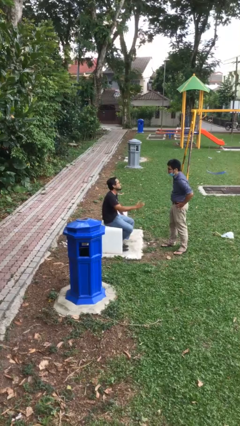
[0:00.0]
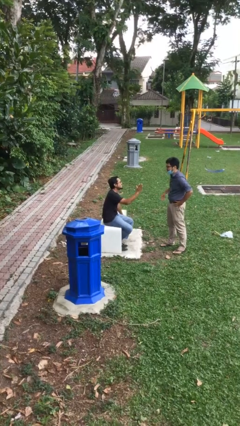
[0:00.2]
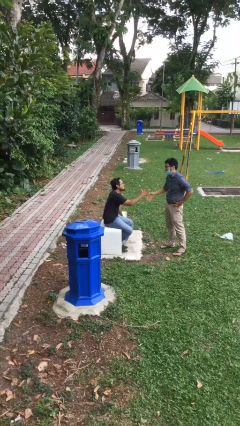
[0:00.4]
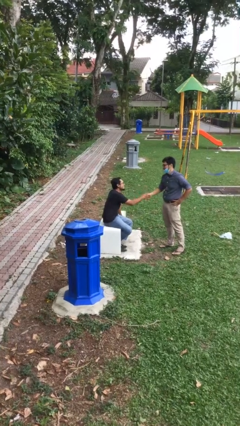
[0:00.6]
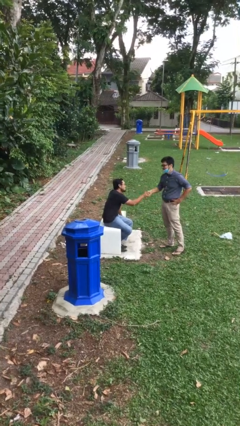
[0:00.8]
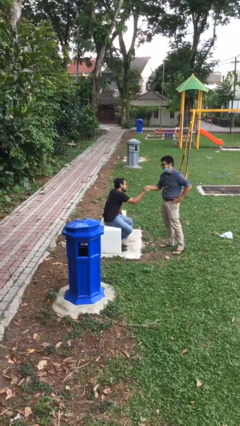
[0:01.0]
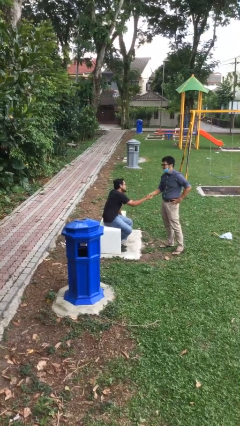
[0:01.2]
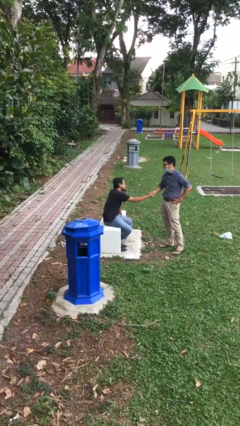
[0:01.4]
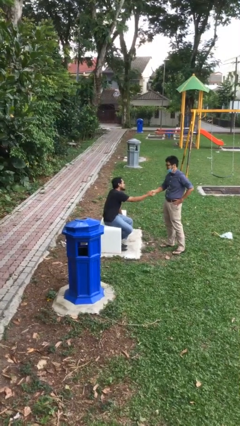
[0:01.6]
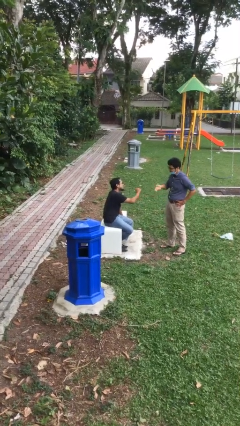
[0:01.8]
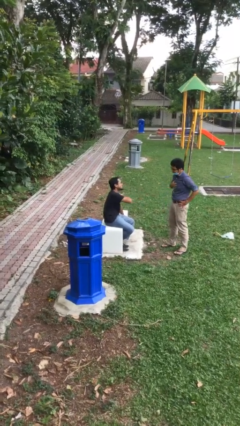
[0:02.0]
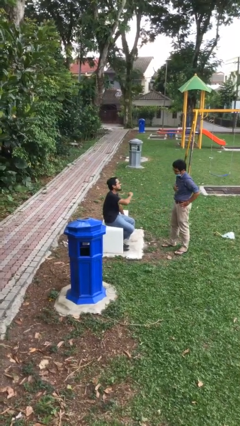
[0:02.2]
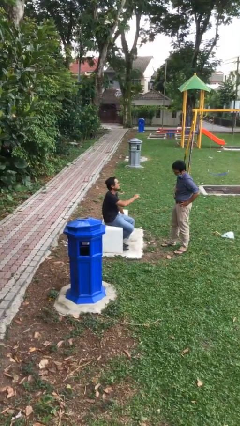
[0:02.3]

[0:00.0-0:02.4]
person shakes hand

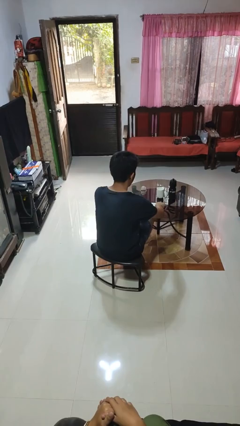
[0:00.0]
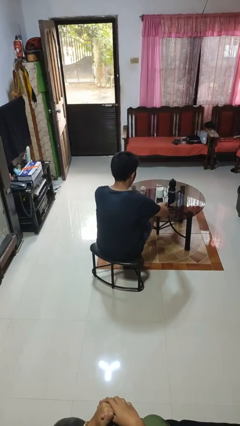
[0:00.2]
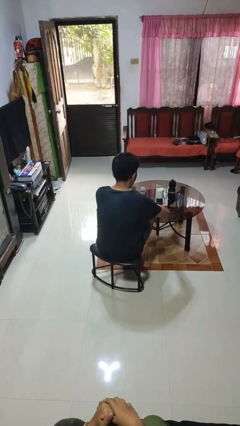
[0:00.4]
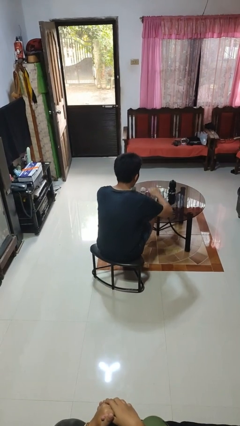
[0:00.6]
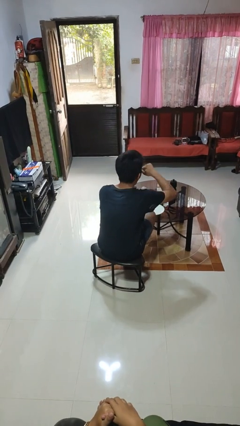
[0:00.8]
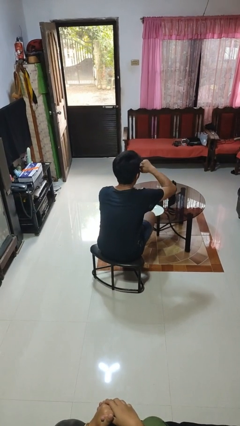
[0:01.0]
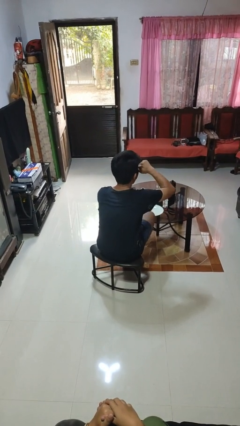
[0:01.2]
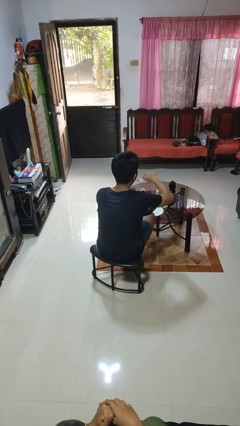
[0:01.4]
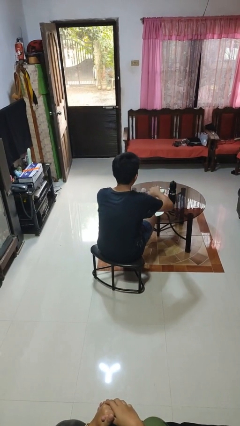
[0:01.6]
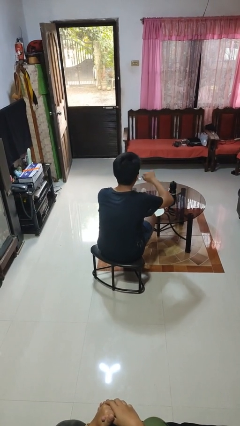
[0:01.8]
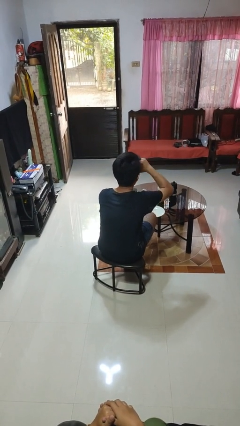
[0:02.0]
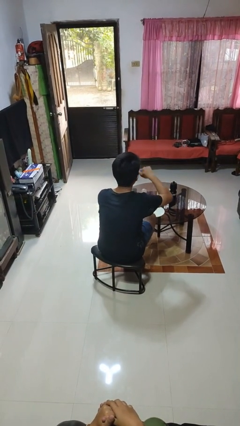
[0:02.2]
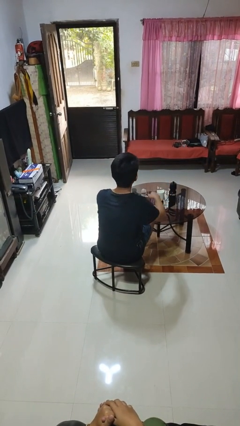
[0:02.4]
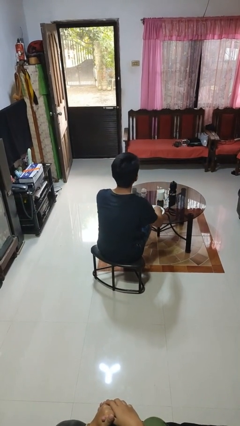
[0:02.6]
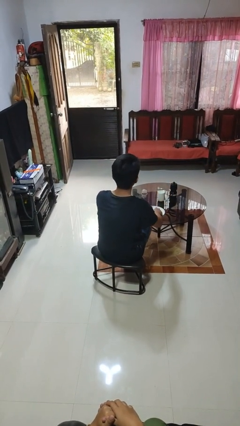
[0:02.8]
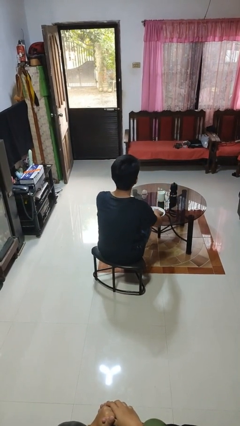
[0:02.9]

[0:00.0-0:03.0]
person eats with utensil

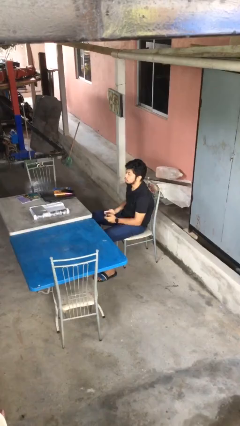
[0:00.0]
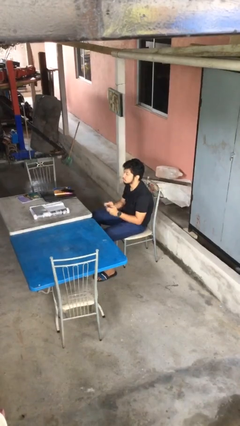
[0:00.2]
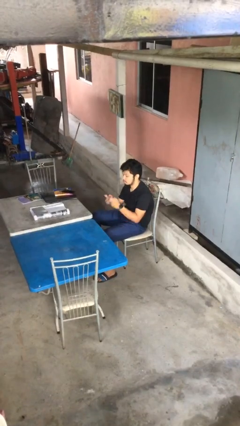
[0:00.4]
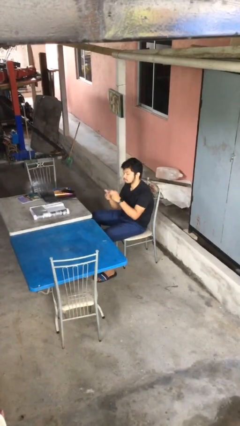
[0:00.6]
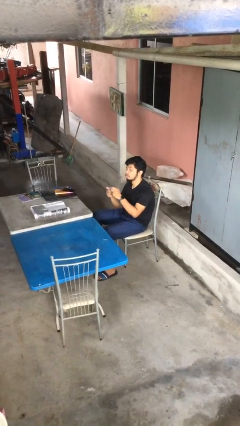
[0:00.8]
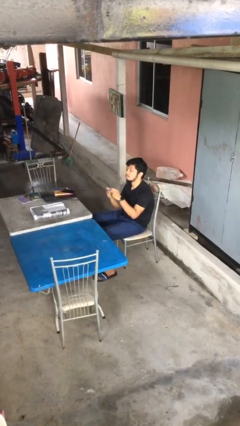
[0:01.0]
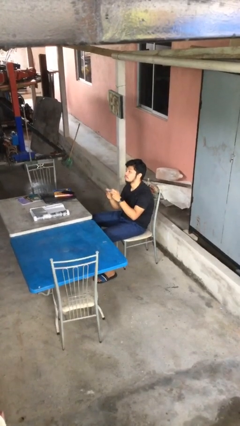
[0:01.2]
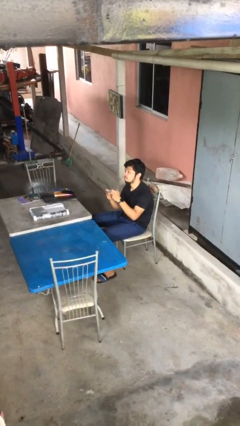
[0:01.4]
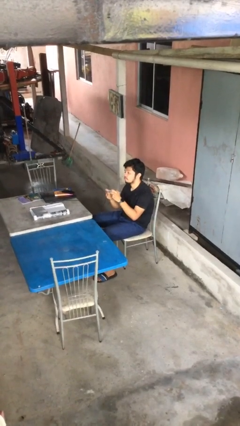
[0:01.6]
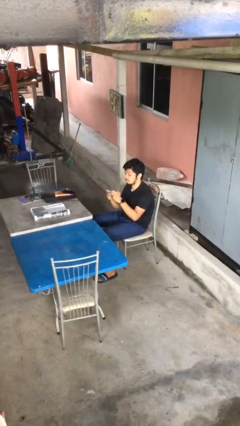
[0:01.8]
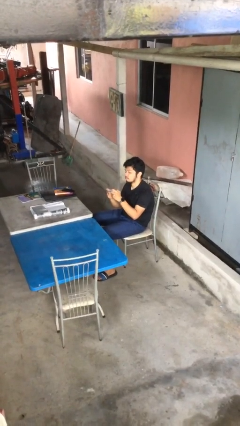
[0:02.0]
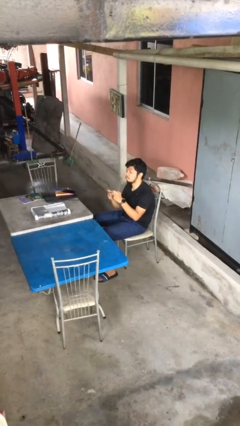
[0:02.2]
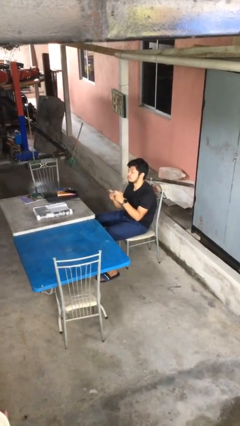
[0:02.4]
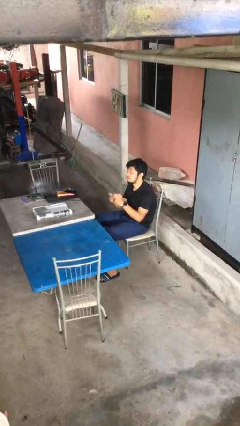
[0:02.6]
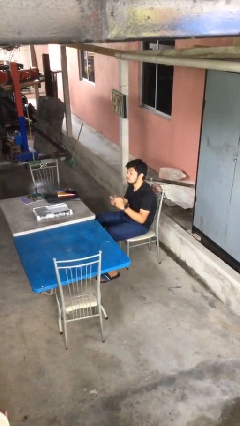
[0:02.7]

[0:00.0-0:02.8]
person interacts with handheld game

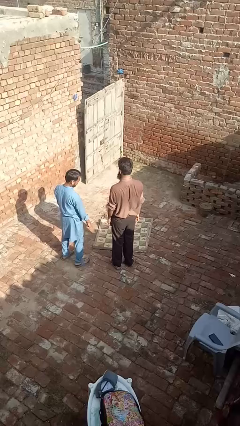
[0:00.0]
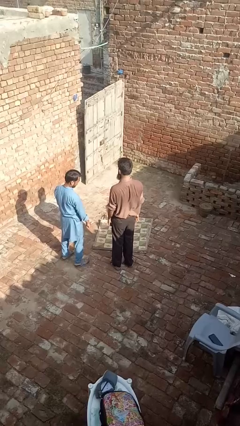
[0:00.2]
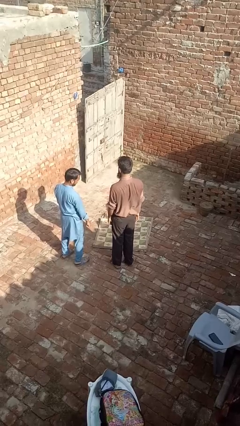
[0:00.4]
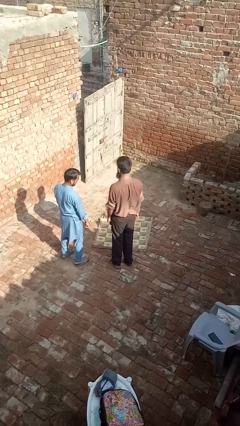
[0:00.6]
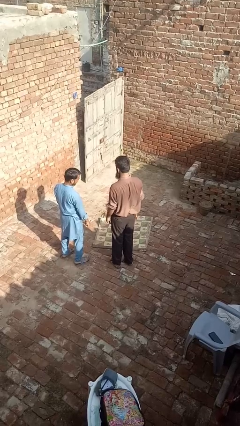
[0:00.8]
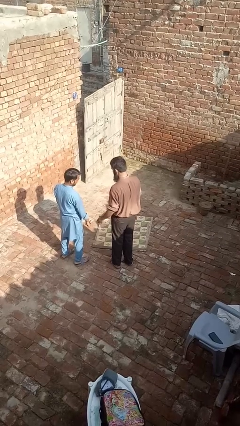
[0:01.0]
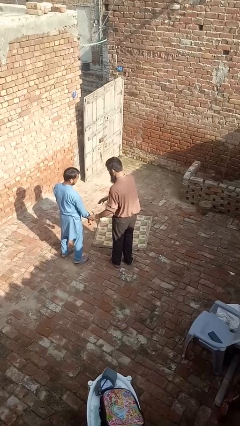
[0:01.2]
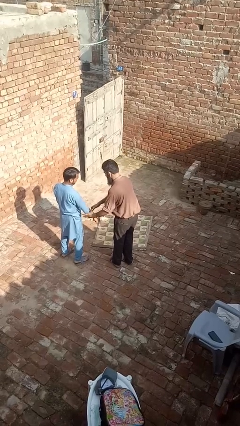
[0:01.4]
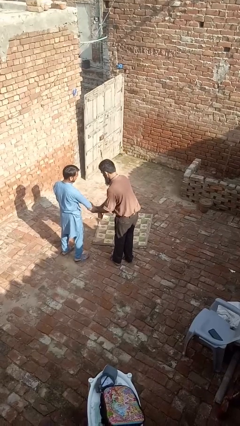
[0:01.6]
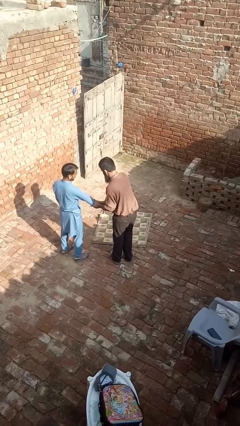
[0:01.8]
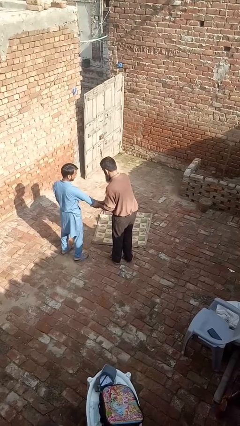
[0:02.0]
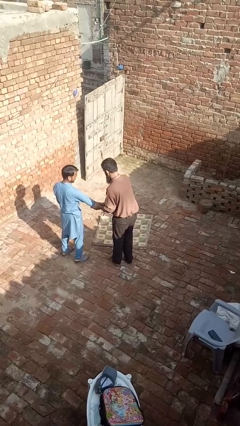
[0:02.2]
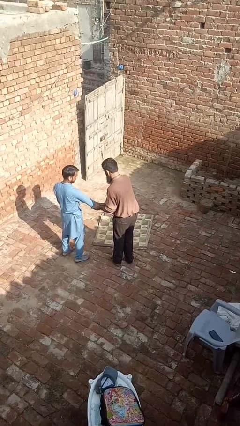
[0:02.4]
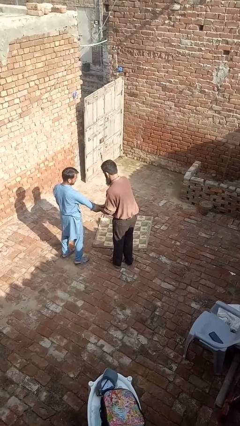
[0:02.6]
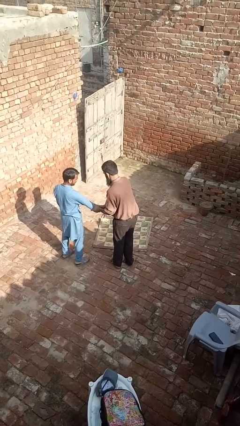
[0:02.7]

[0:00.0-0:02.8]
person grabs person by forearm

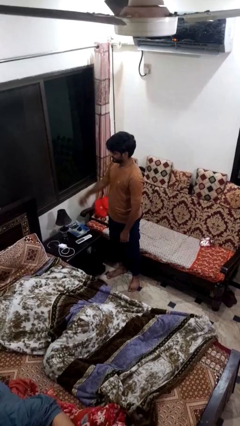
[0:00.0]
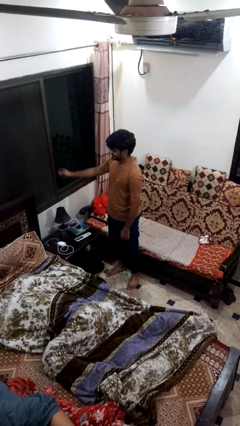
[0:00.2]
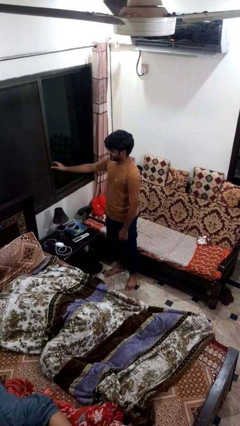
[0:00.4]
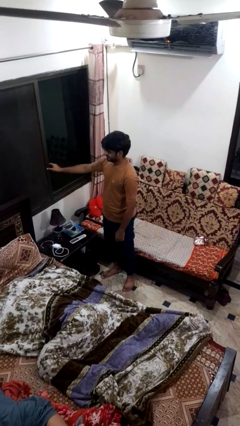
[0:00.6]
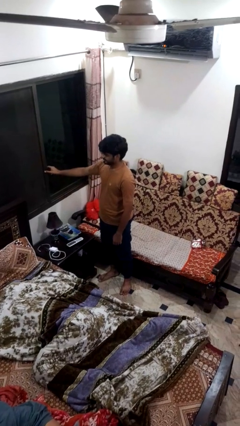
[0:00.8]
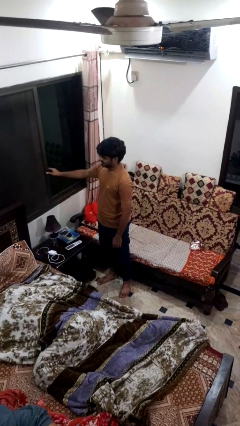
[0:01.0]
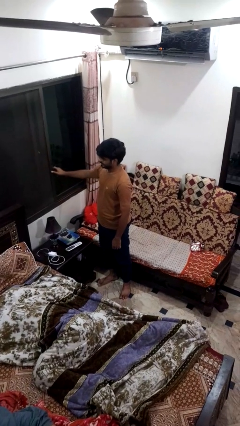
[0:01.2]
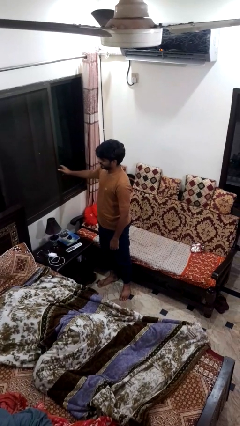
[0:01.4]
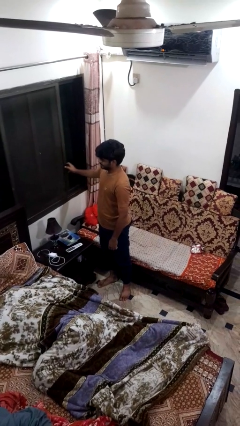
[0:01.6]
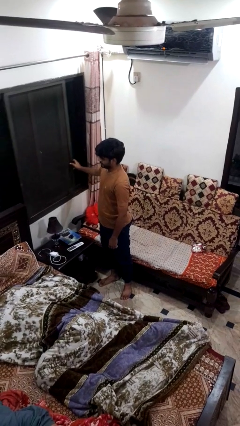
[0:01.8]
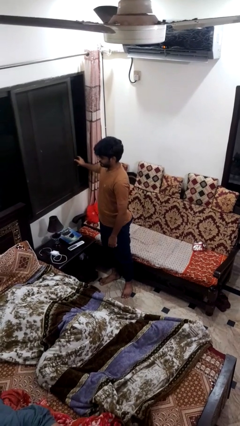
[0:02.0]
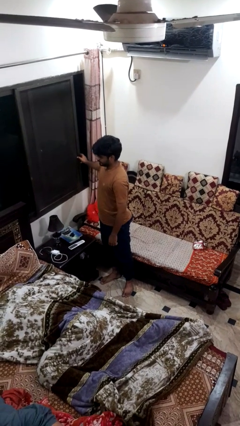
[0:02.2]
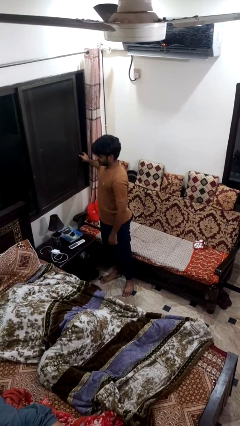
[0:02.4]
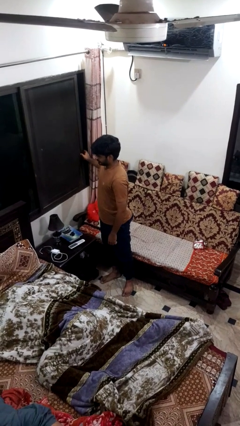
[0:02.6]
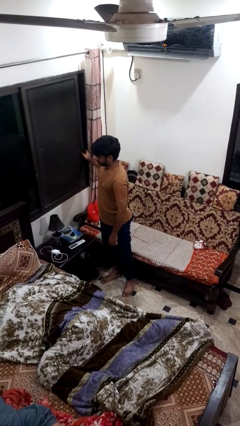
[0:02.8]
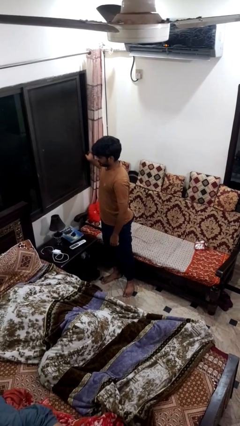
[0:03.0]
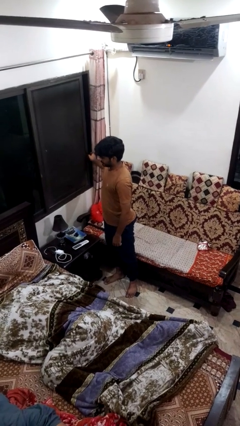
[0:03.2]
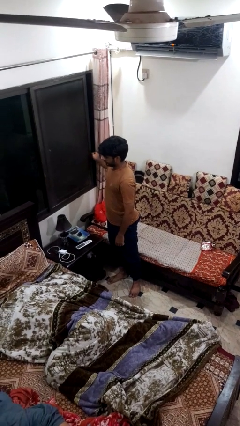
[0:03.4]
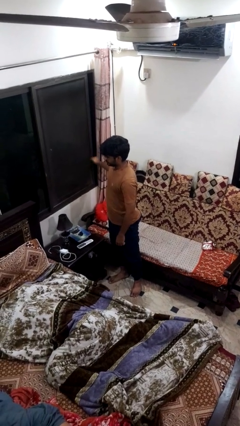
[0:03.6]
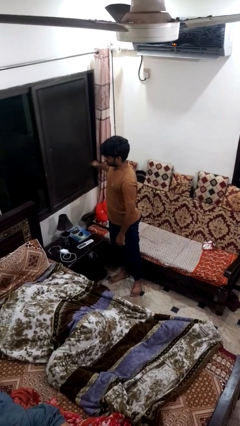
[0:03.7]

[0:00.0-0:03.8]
person opens home window

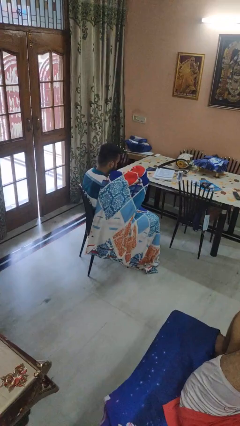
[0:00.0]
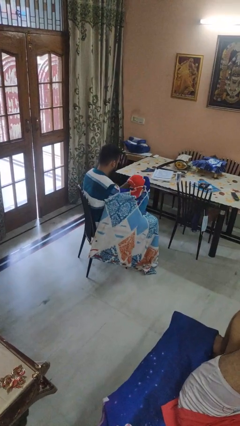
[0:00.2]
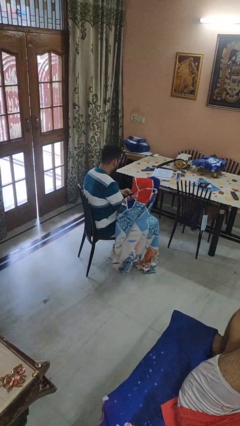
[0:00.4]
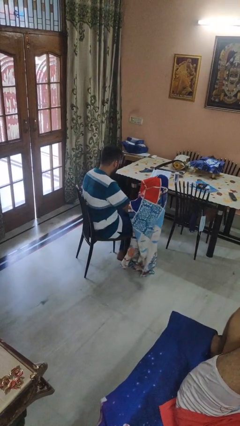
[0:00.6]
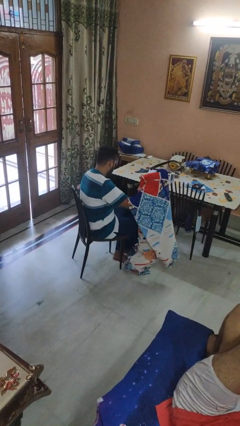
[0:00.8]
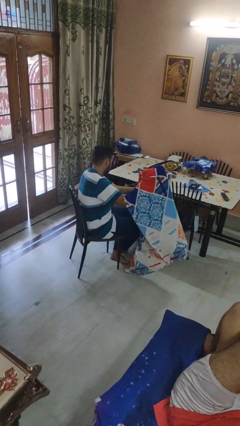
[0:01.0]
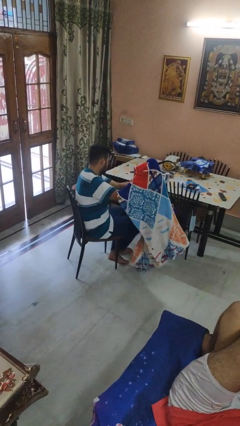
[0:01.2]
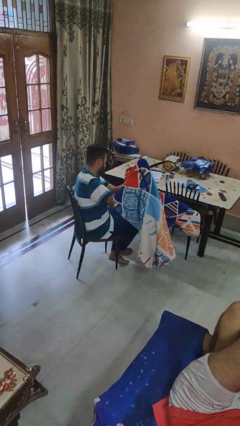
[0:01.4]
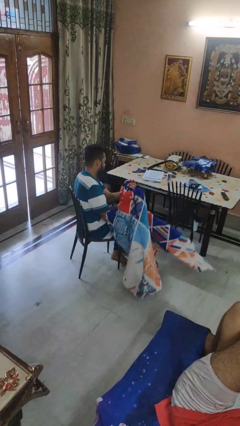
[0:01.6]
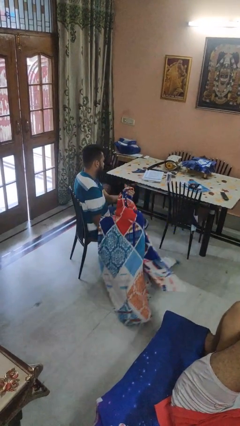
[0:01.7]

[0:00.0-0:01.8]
person uncovers with blanket

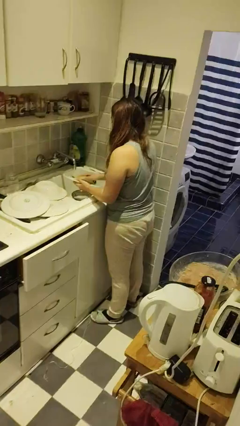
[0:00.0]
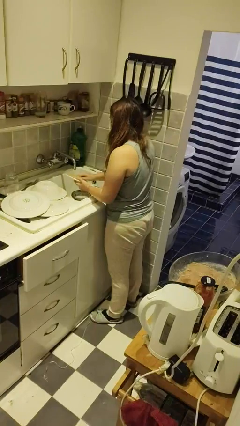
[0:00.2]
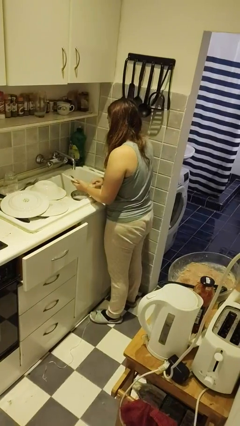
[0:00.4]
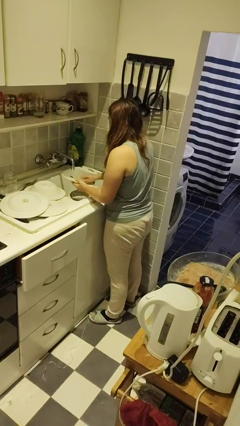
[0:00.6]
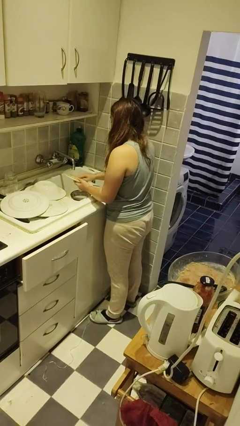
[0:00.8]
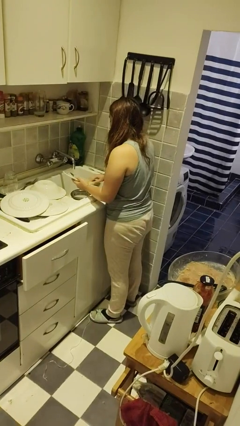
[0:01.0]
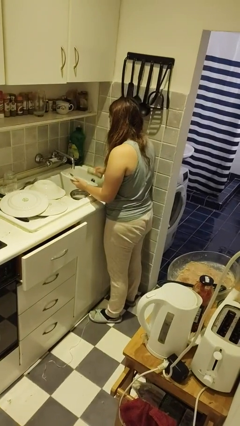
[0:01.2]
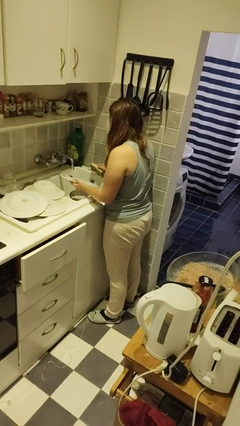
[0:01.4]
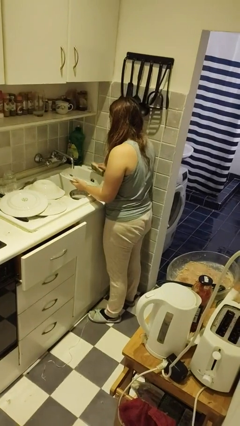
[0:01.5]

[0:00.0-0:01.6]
person washes dish
